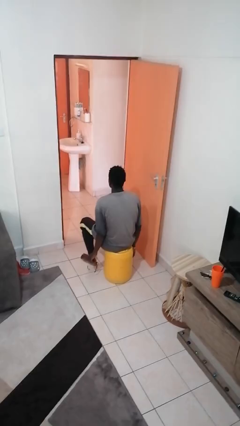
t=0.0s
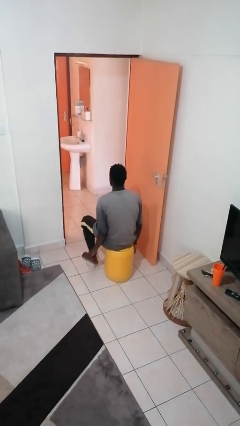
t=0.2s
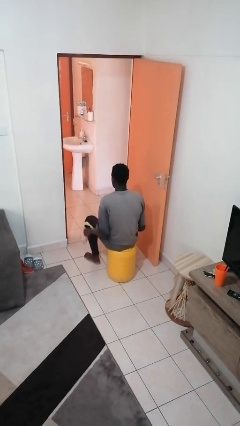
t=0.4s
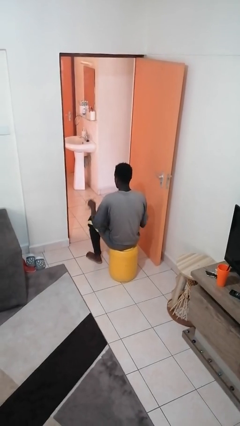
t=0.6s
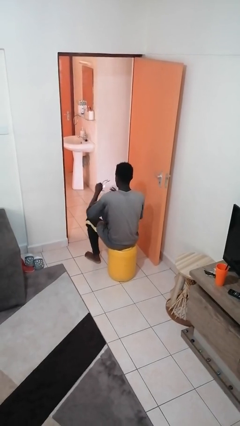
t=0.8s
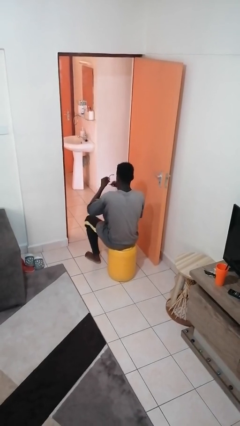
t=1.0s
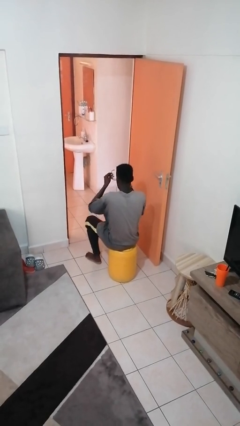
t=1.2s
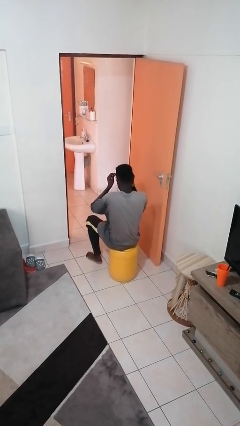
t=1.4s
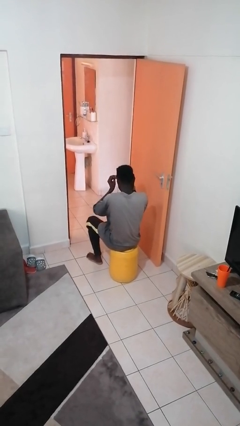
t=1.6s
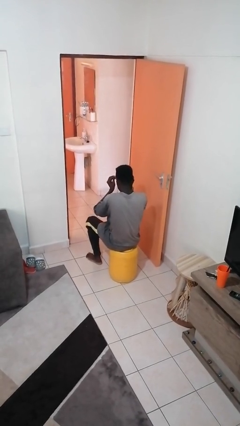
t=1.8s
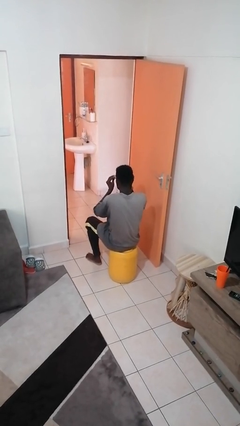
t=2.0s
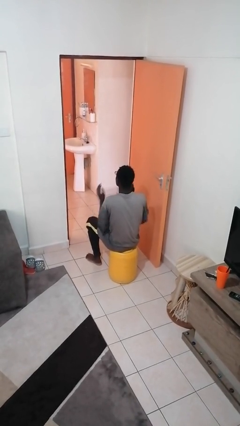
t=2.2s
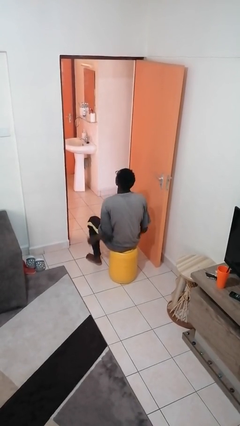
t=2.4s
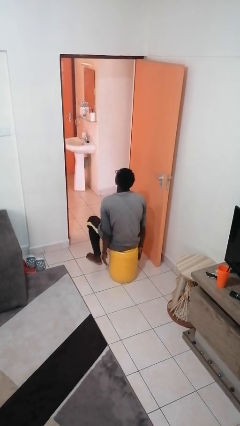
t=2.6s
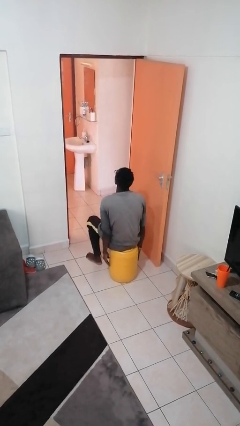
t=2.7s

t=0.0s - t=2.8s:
person puts on glasses

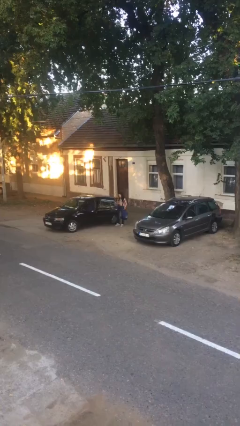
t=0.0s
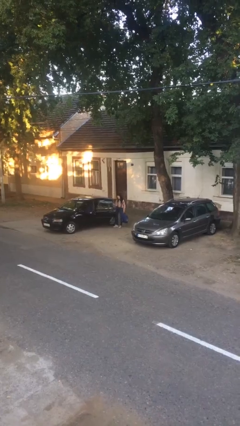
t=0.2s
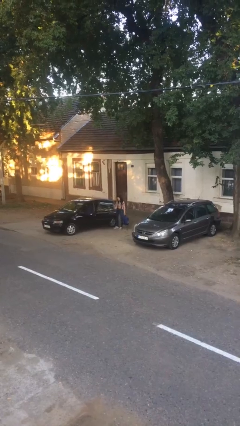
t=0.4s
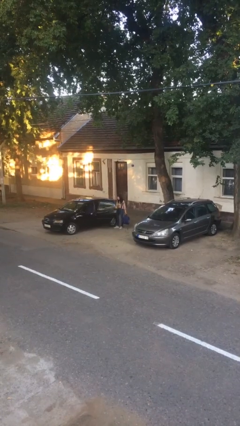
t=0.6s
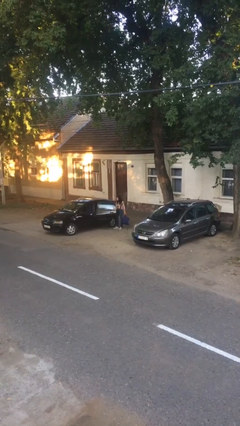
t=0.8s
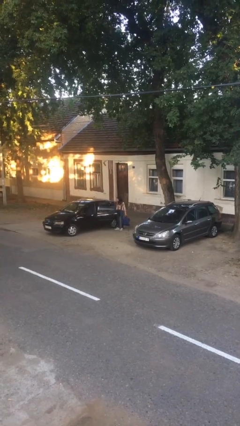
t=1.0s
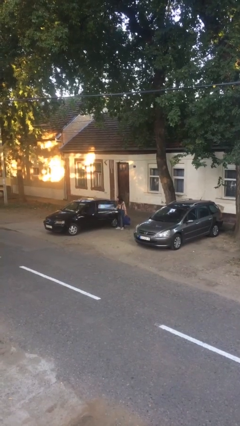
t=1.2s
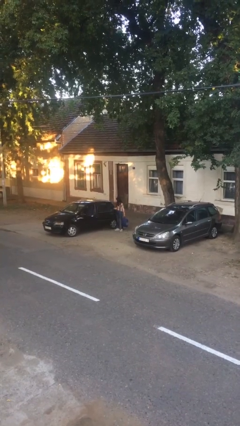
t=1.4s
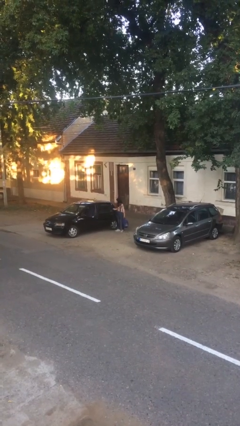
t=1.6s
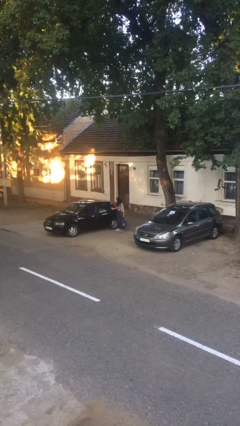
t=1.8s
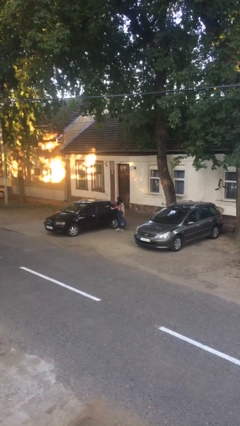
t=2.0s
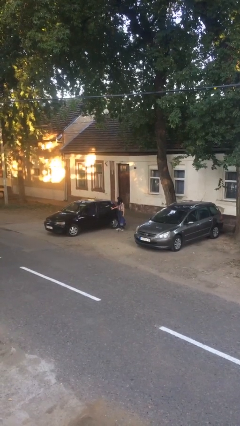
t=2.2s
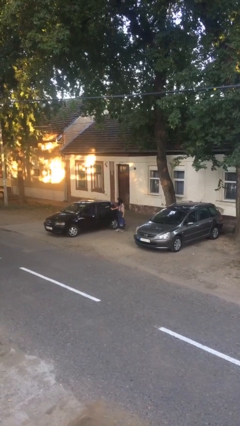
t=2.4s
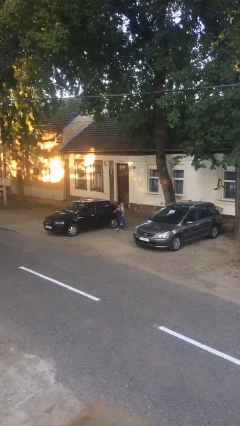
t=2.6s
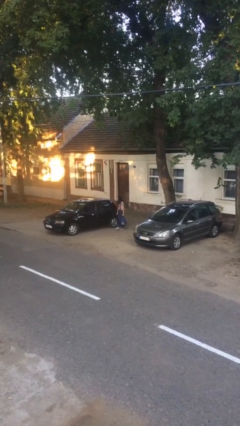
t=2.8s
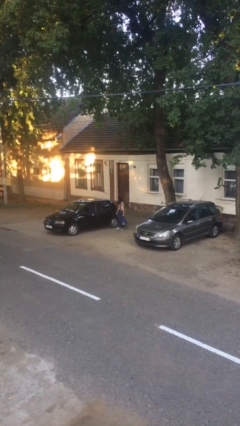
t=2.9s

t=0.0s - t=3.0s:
person closes car door

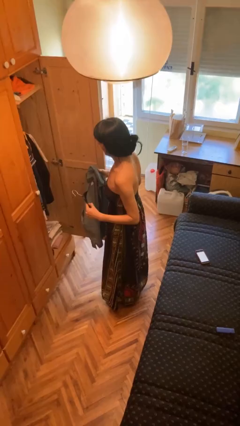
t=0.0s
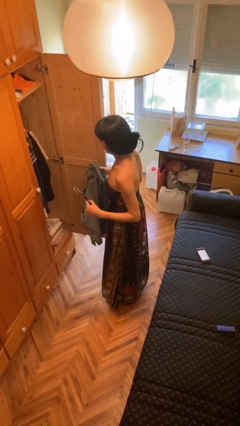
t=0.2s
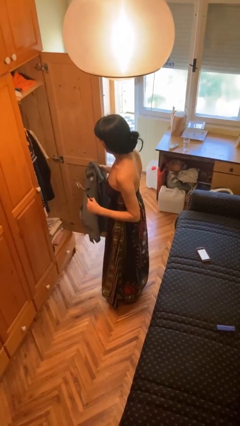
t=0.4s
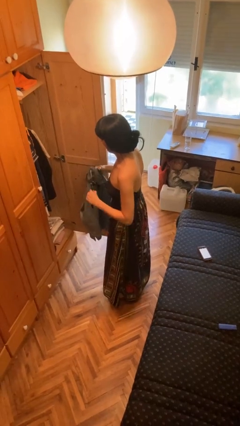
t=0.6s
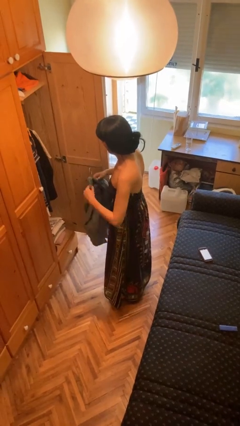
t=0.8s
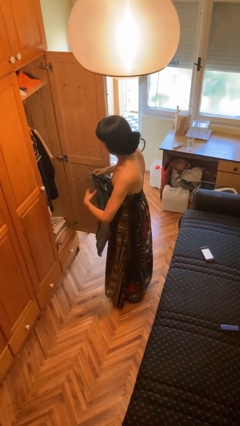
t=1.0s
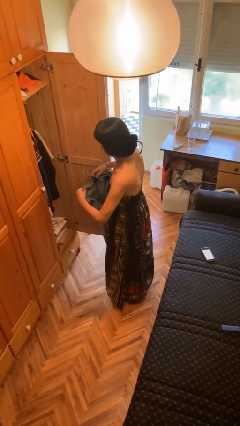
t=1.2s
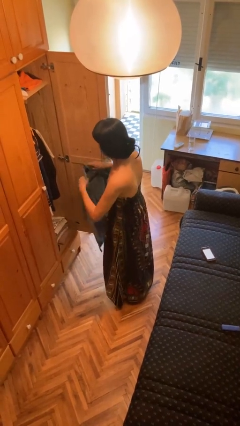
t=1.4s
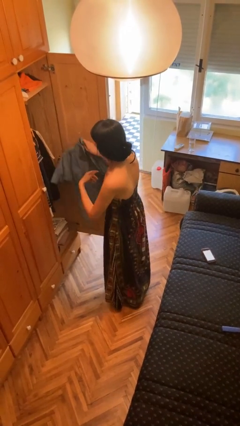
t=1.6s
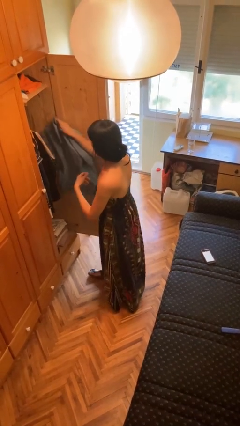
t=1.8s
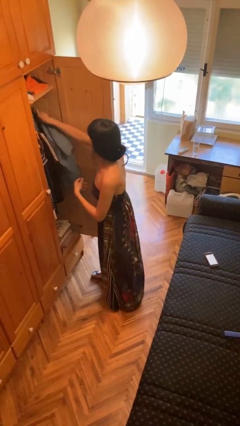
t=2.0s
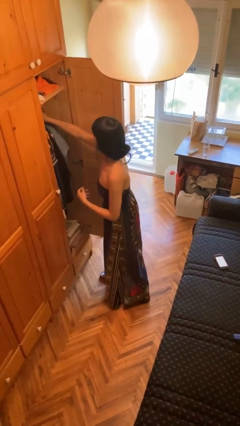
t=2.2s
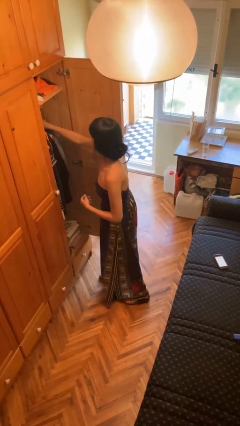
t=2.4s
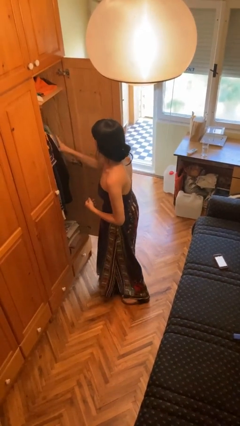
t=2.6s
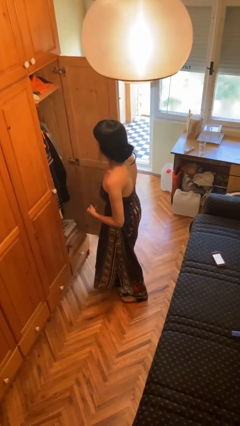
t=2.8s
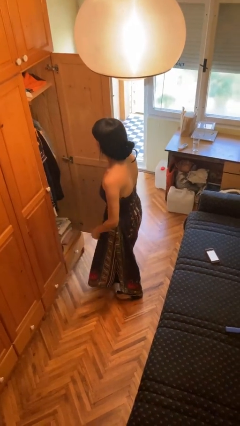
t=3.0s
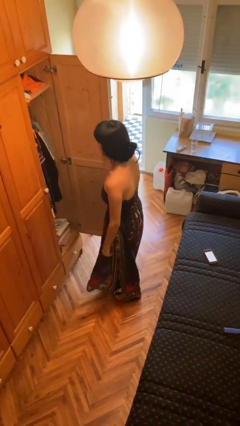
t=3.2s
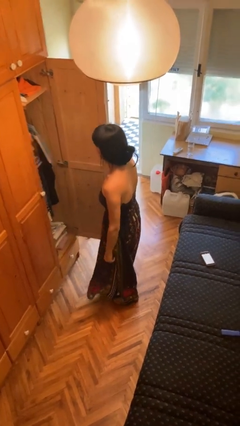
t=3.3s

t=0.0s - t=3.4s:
person puts clothes into closet

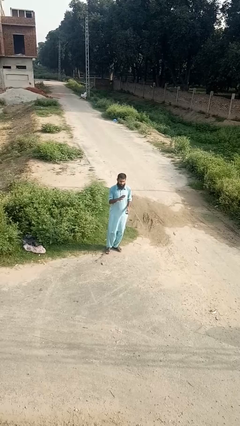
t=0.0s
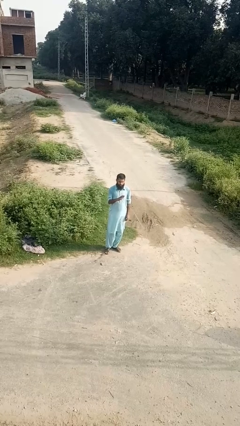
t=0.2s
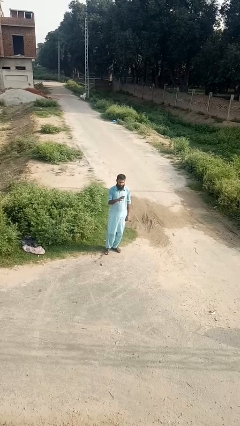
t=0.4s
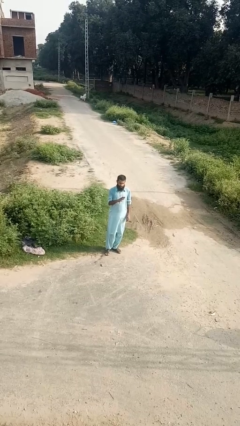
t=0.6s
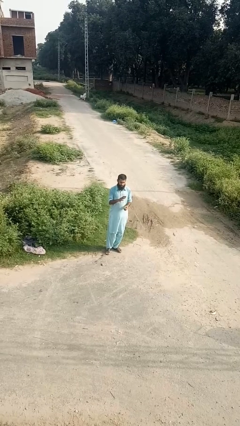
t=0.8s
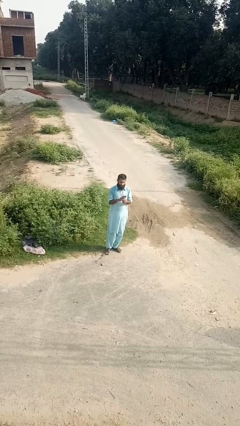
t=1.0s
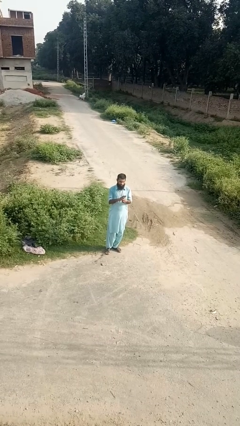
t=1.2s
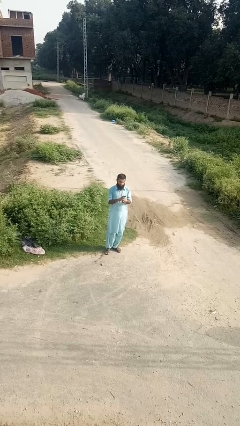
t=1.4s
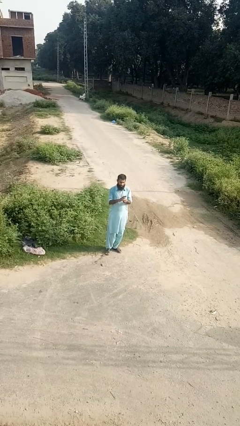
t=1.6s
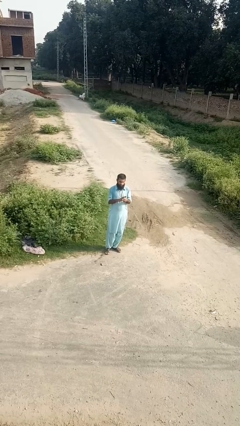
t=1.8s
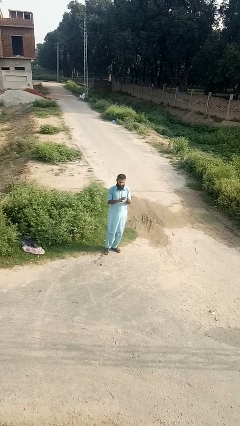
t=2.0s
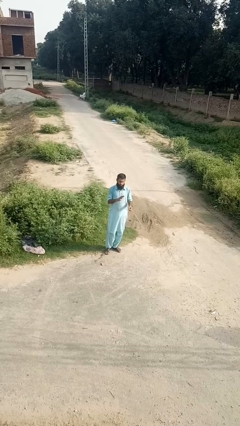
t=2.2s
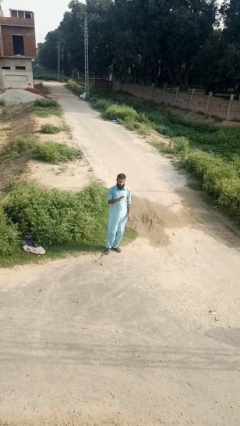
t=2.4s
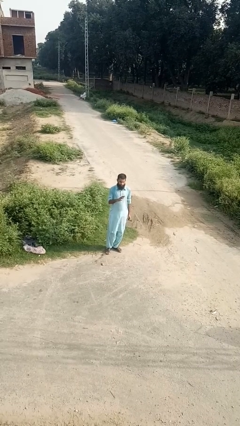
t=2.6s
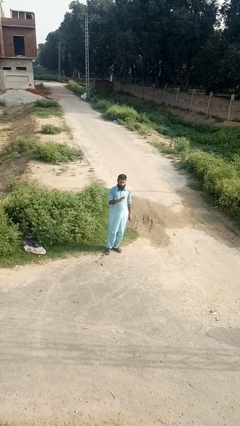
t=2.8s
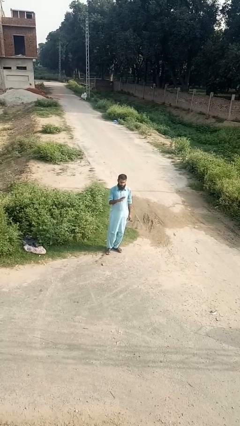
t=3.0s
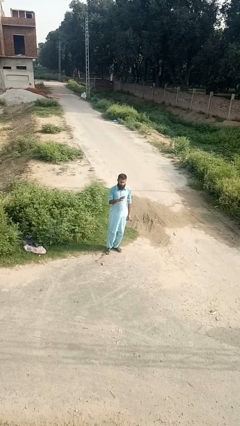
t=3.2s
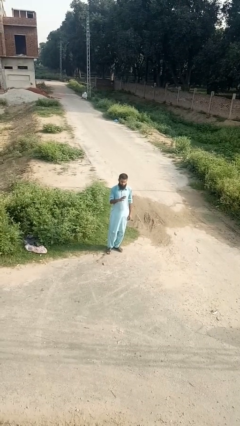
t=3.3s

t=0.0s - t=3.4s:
person takes off ring

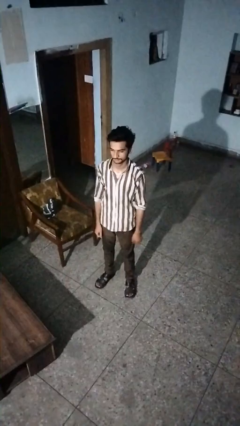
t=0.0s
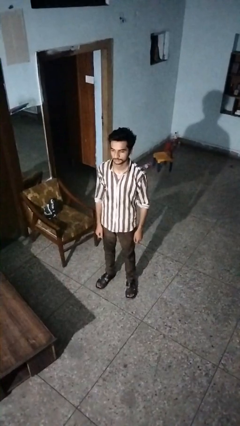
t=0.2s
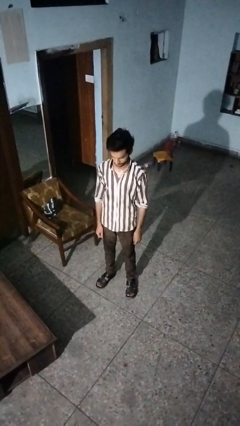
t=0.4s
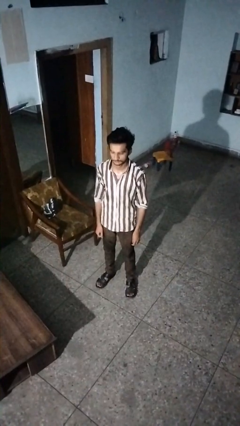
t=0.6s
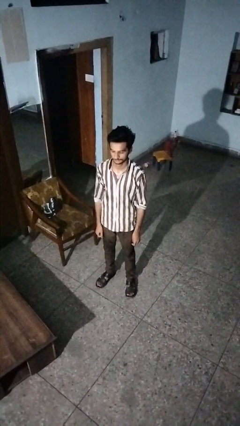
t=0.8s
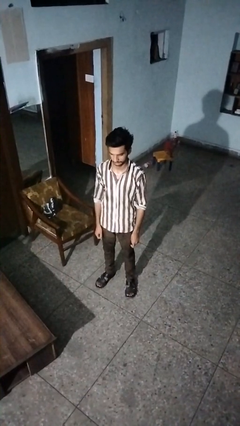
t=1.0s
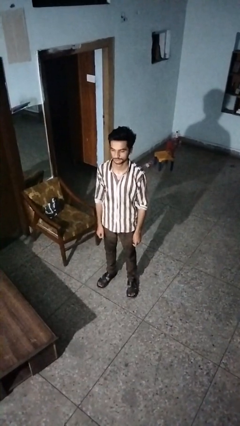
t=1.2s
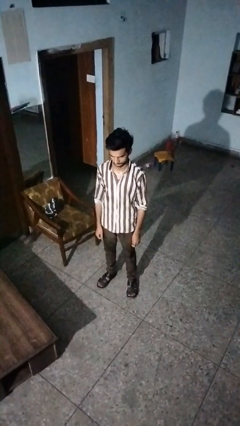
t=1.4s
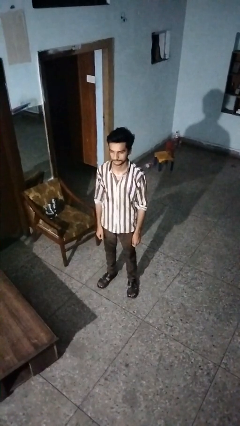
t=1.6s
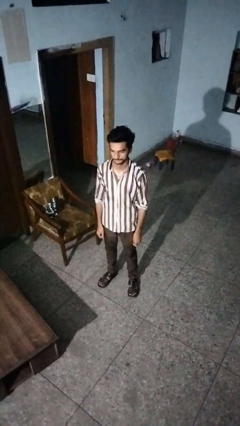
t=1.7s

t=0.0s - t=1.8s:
person nods head

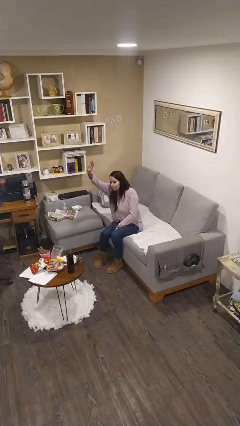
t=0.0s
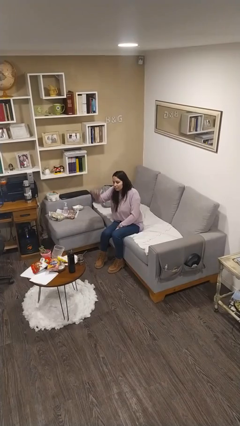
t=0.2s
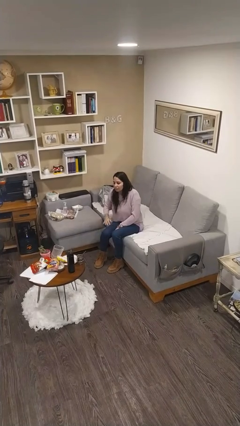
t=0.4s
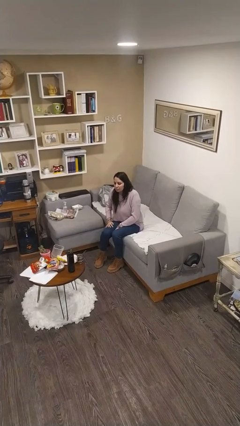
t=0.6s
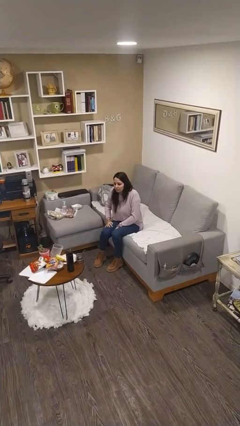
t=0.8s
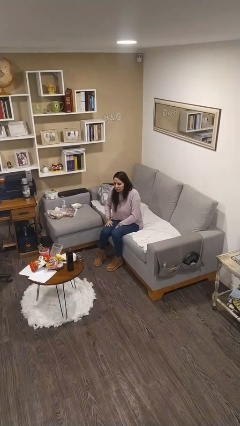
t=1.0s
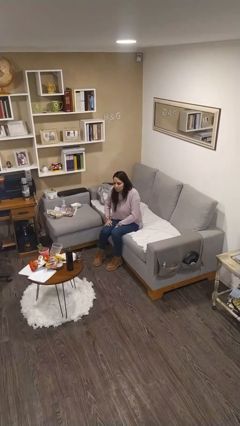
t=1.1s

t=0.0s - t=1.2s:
person gestures lower hand

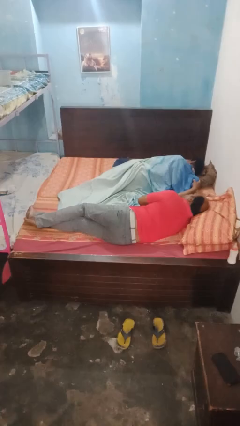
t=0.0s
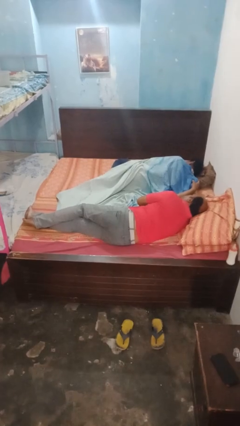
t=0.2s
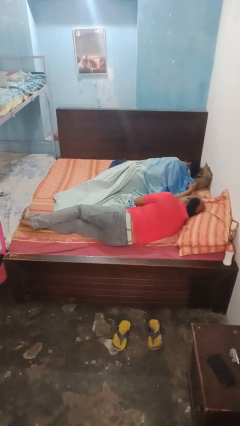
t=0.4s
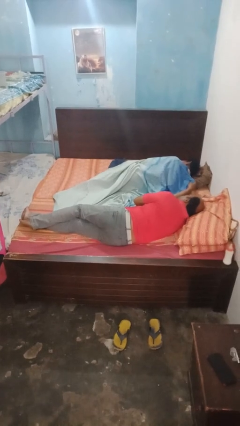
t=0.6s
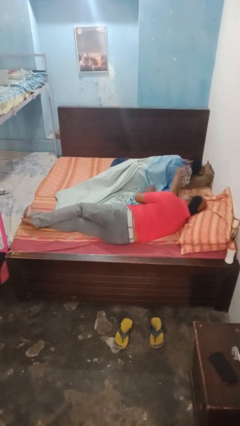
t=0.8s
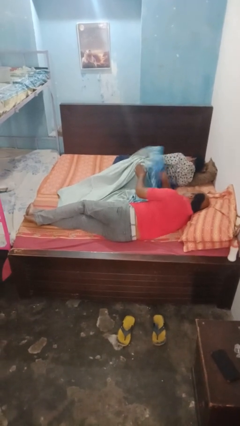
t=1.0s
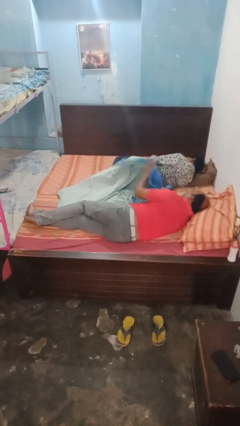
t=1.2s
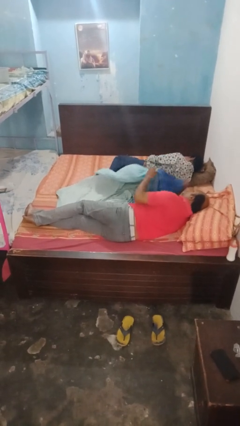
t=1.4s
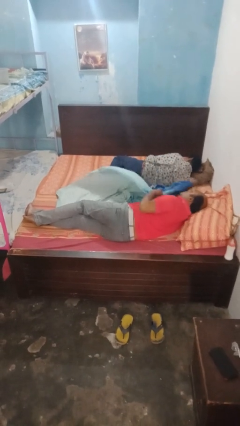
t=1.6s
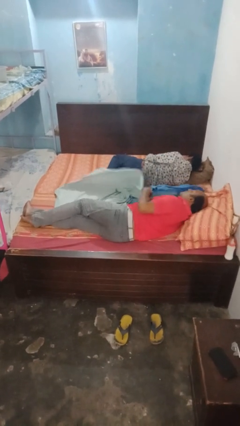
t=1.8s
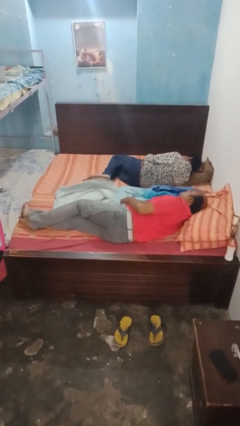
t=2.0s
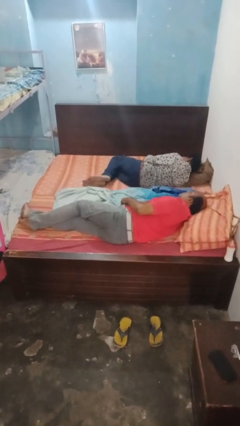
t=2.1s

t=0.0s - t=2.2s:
person uncovers friend with blanket
